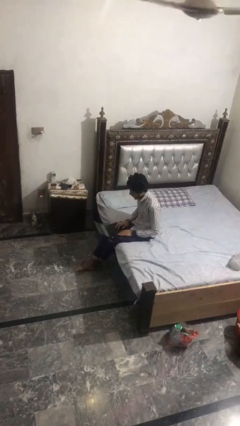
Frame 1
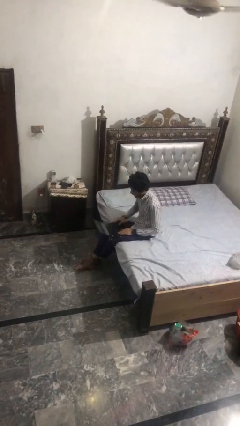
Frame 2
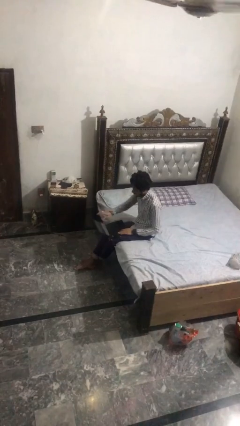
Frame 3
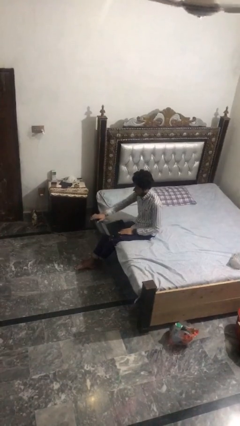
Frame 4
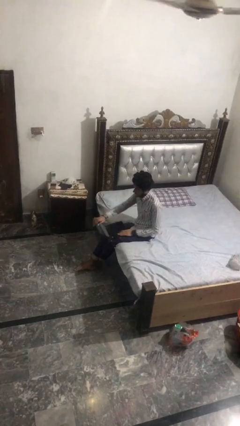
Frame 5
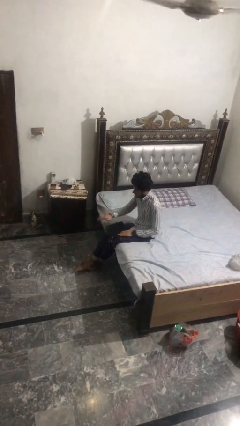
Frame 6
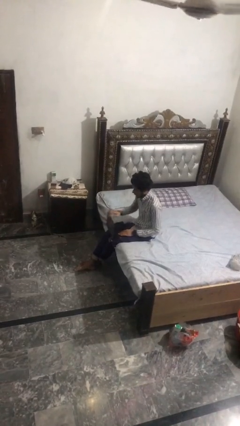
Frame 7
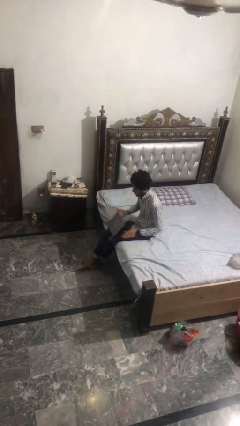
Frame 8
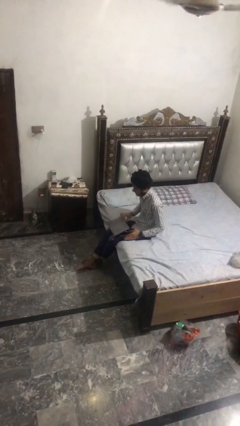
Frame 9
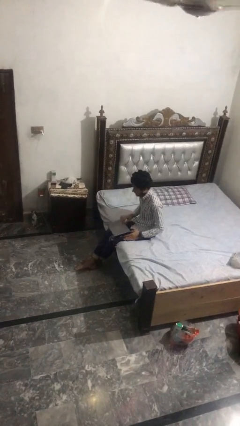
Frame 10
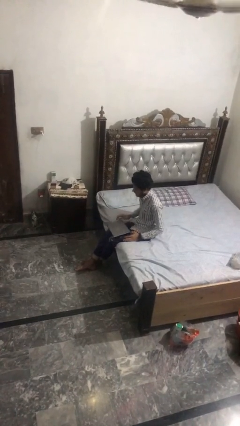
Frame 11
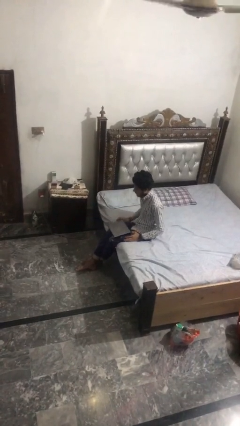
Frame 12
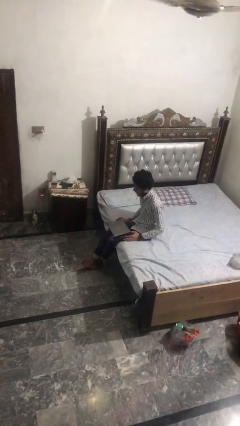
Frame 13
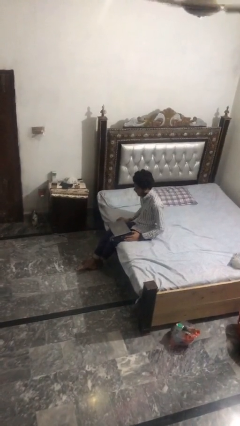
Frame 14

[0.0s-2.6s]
person closes laptop

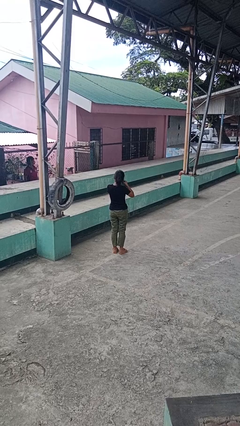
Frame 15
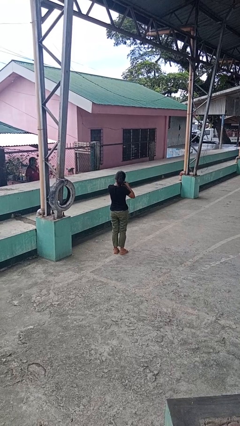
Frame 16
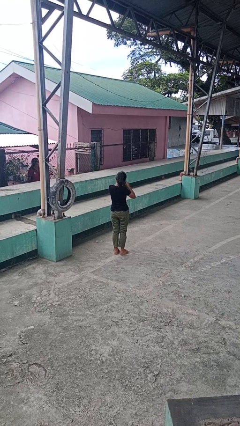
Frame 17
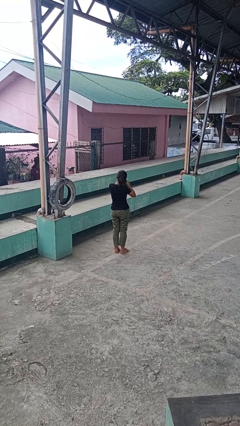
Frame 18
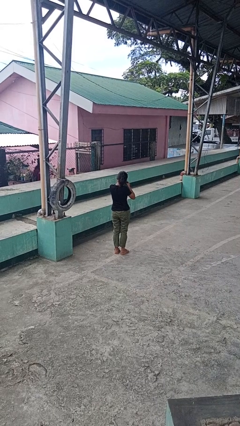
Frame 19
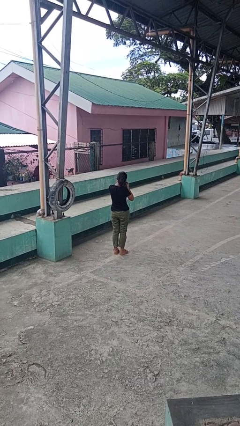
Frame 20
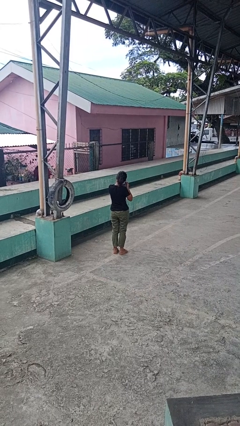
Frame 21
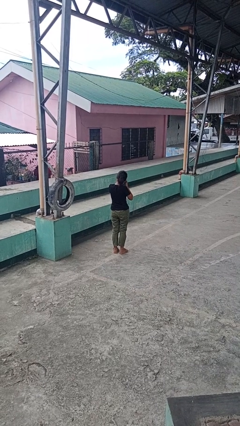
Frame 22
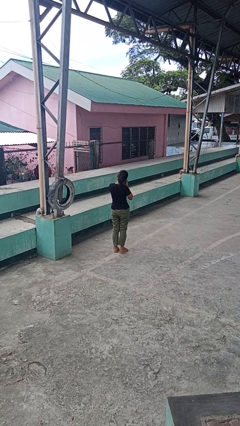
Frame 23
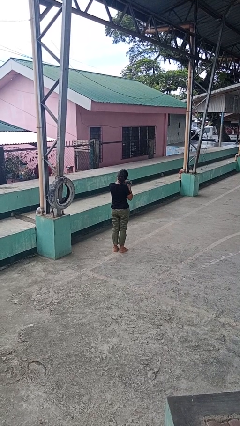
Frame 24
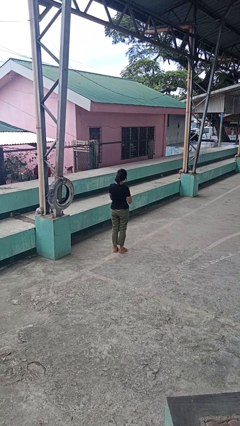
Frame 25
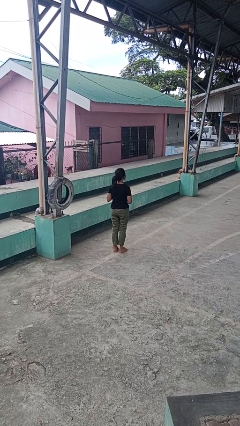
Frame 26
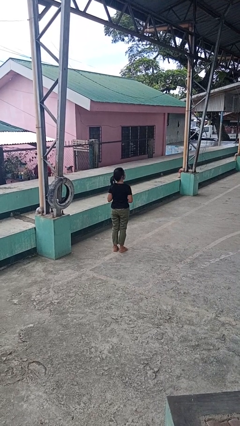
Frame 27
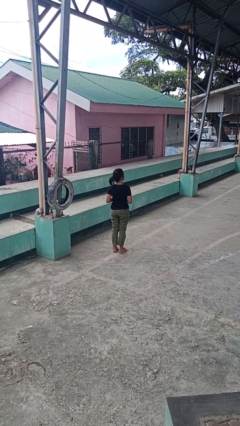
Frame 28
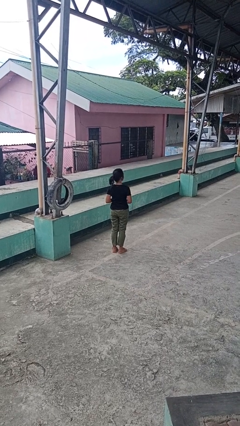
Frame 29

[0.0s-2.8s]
person takes off earrings

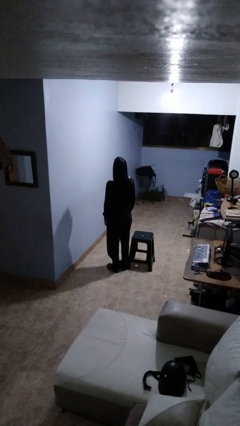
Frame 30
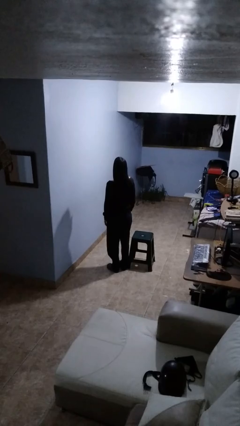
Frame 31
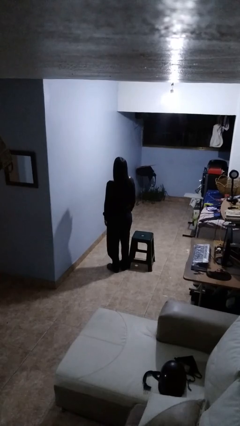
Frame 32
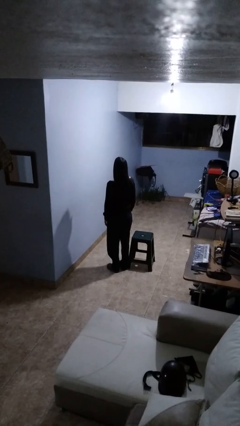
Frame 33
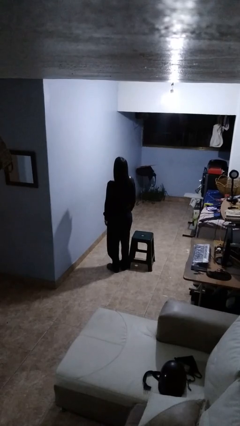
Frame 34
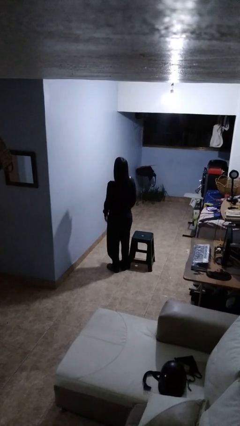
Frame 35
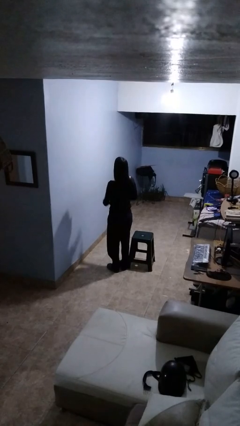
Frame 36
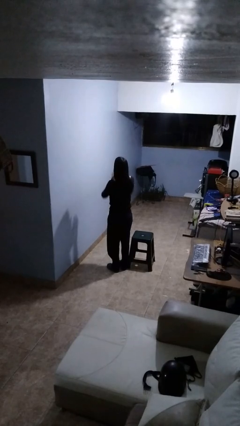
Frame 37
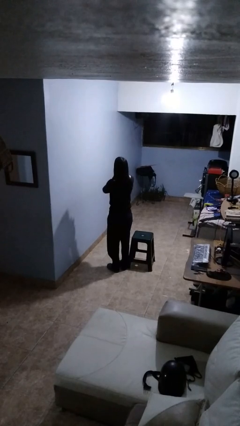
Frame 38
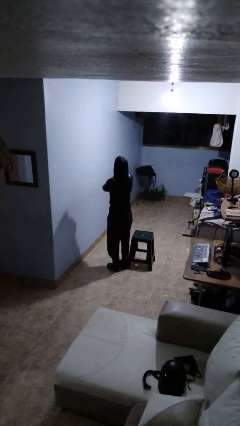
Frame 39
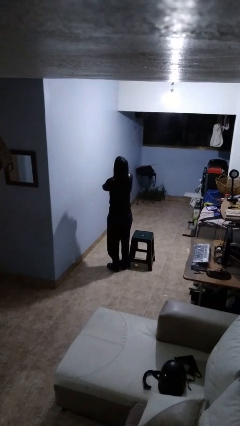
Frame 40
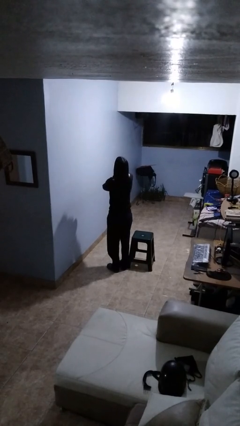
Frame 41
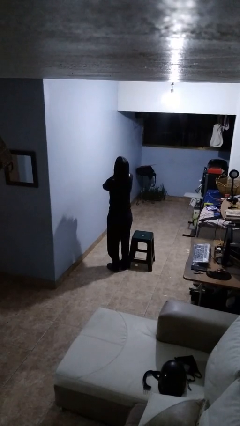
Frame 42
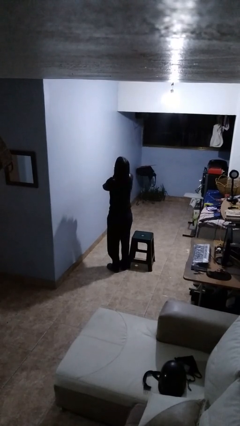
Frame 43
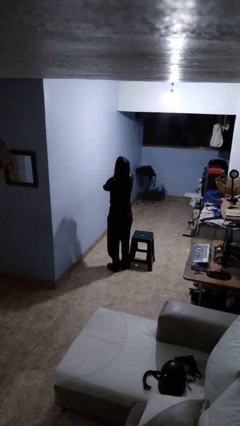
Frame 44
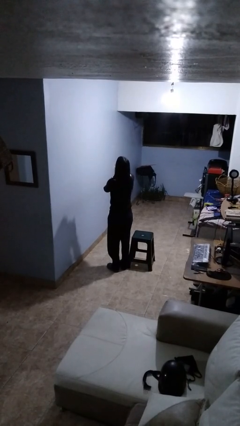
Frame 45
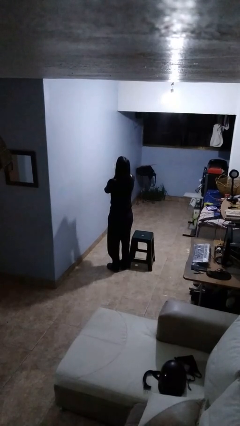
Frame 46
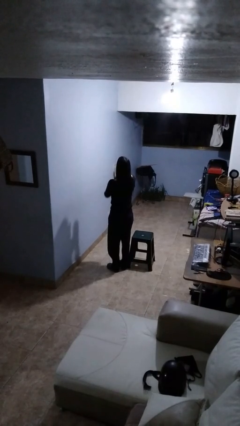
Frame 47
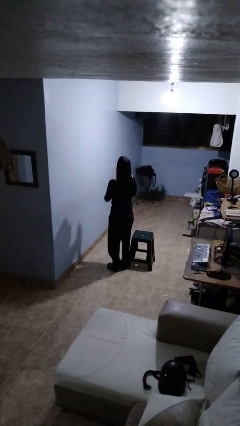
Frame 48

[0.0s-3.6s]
person yawns

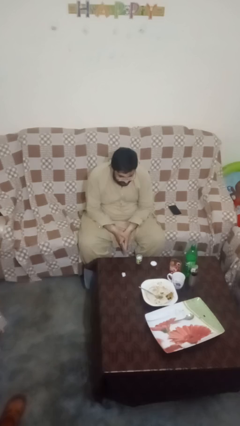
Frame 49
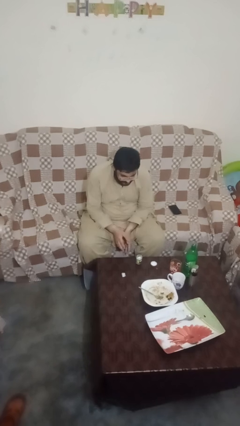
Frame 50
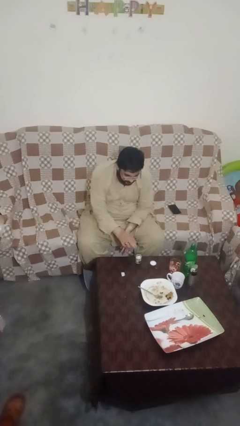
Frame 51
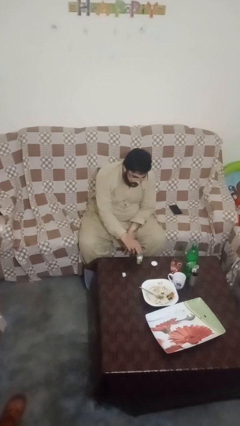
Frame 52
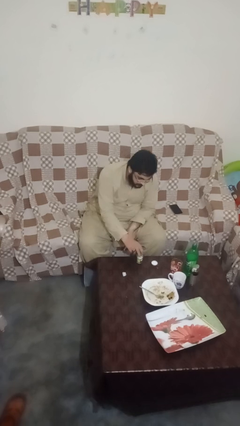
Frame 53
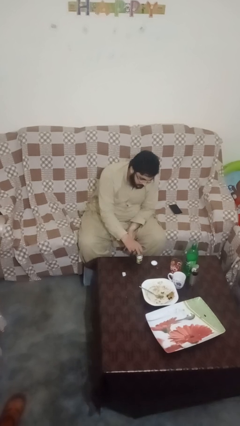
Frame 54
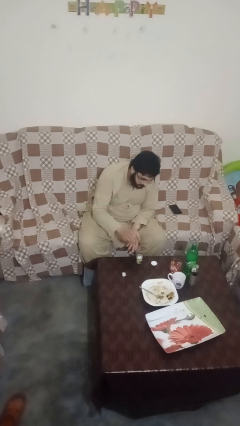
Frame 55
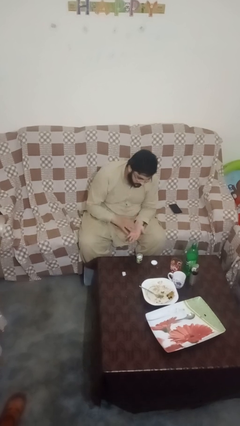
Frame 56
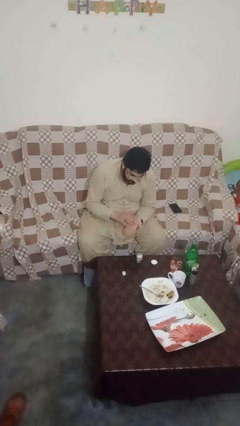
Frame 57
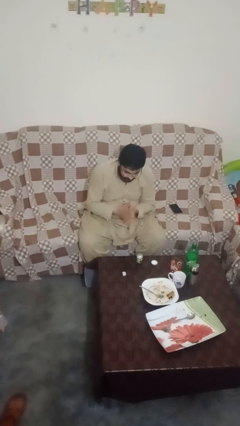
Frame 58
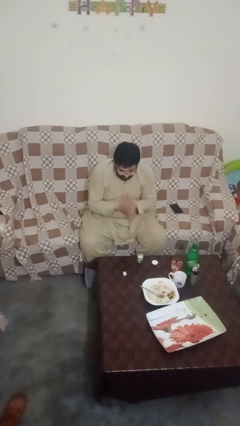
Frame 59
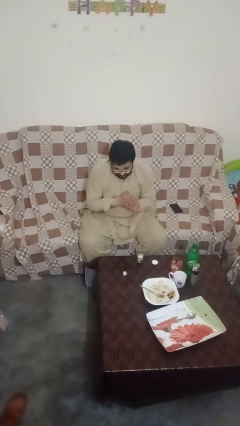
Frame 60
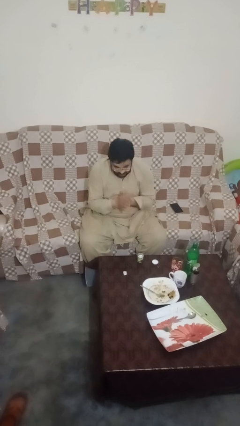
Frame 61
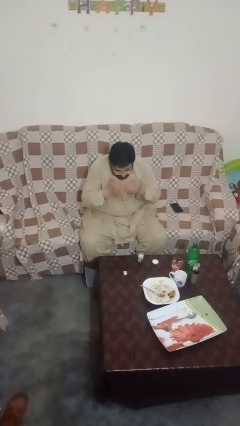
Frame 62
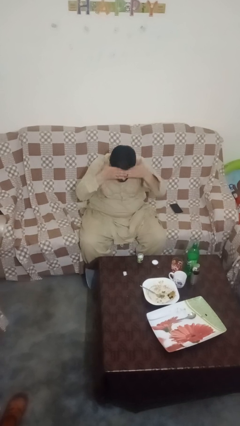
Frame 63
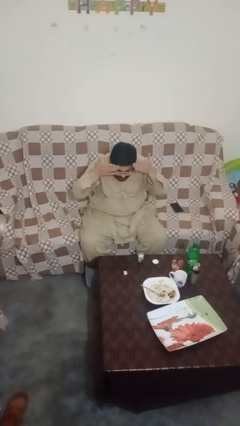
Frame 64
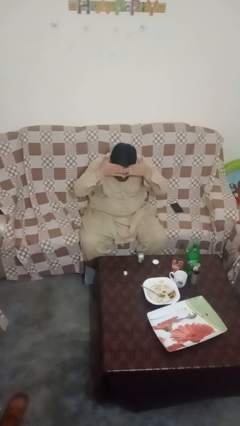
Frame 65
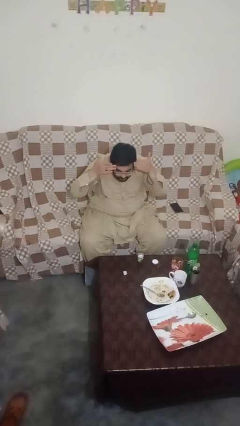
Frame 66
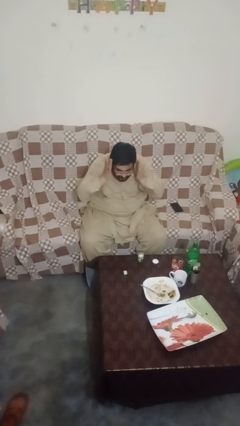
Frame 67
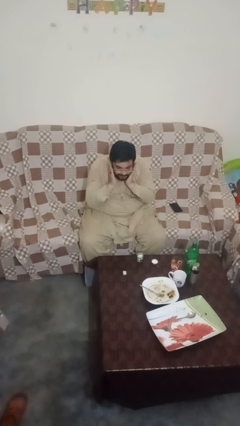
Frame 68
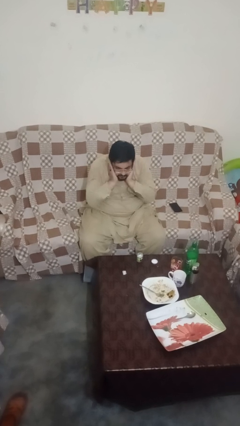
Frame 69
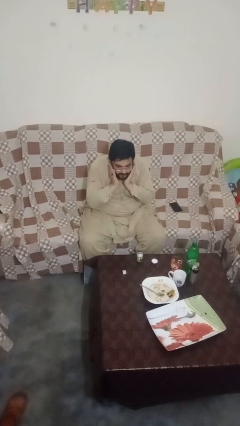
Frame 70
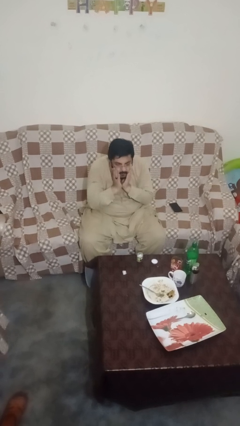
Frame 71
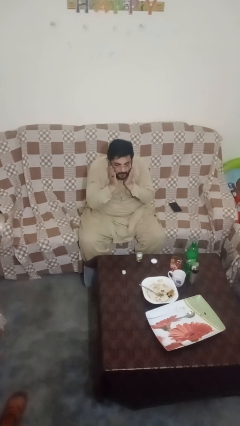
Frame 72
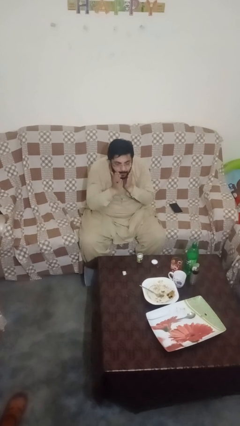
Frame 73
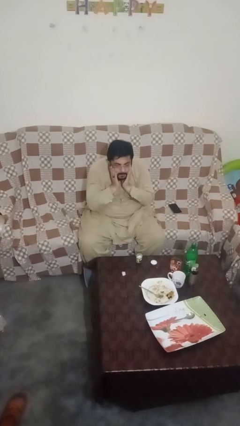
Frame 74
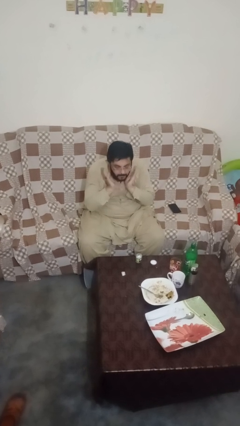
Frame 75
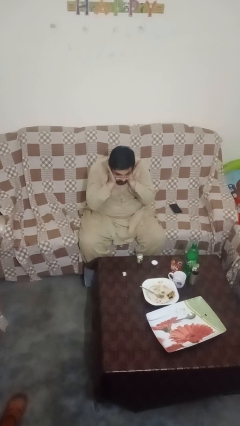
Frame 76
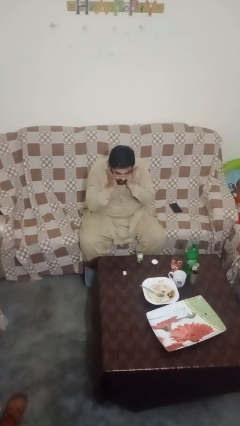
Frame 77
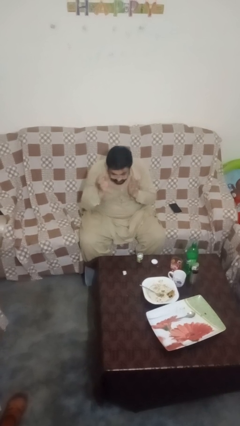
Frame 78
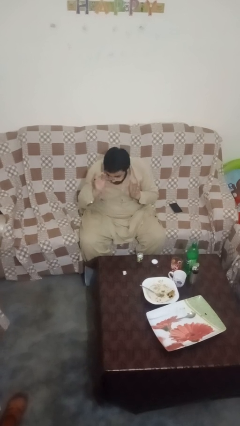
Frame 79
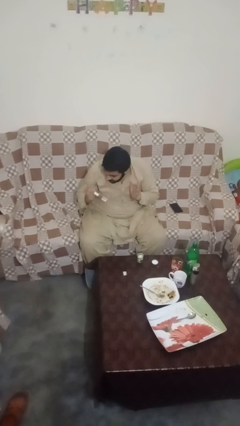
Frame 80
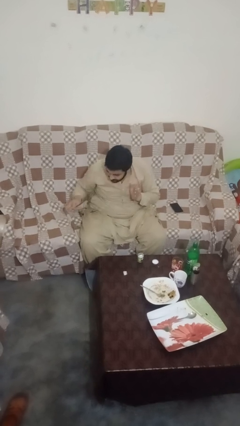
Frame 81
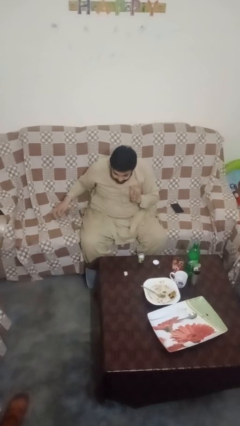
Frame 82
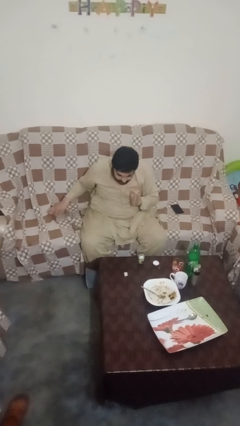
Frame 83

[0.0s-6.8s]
person applies facial moisturizer

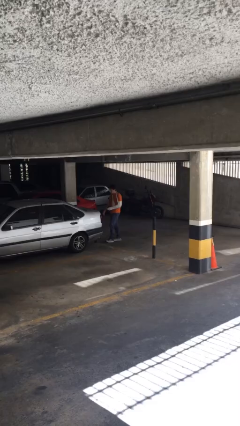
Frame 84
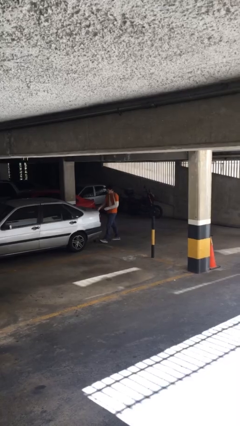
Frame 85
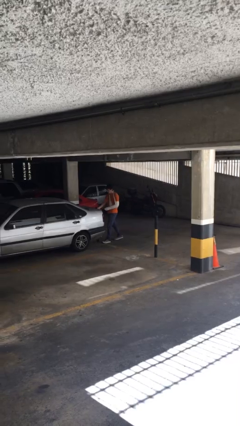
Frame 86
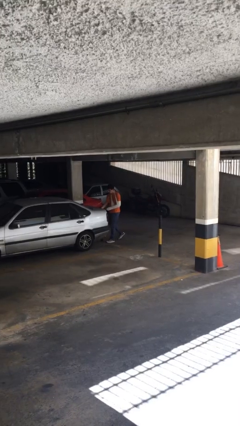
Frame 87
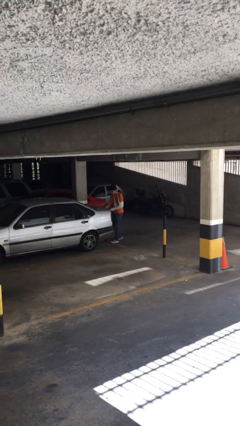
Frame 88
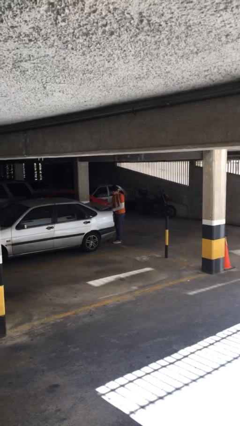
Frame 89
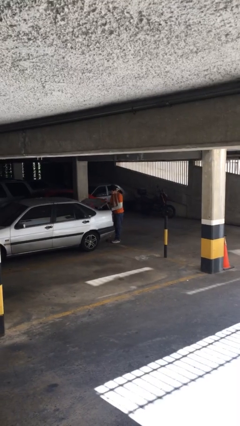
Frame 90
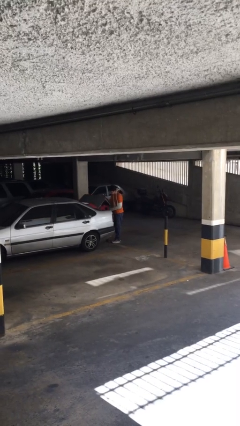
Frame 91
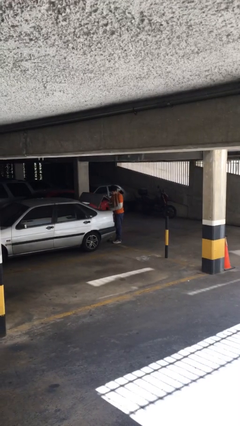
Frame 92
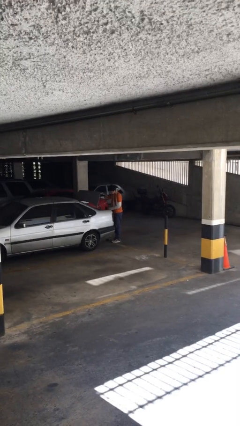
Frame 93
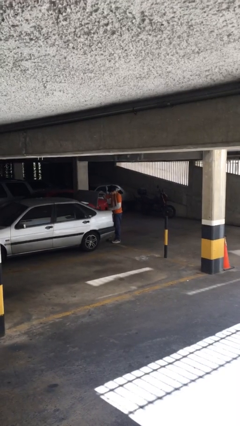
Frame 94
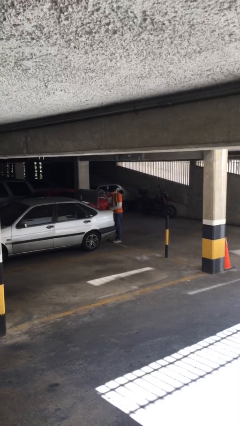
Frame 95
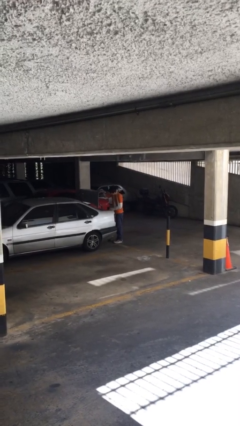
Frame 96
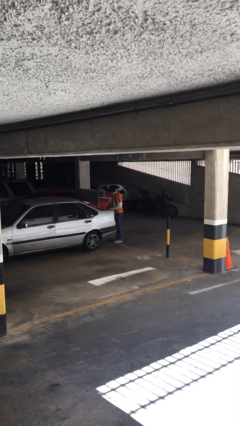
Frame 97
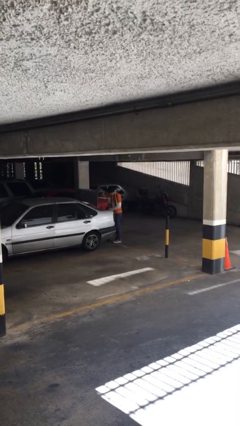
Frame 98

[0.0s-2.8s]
person opens car trunk
